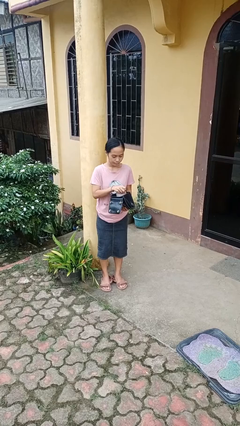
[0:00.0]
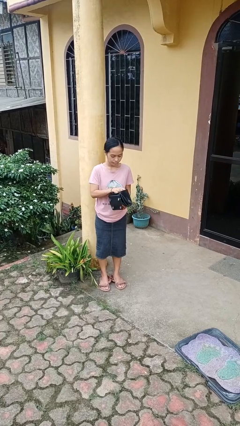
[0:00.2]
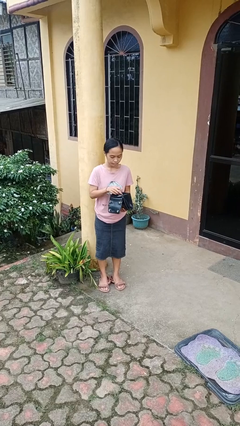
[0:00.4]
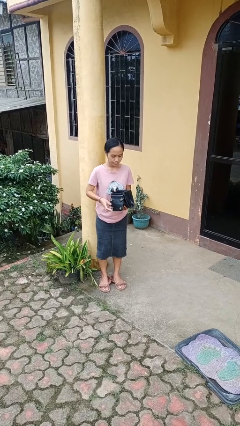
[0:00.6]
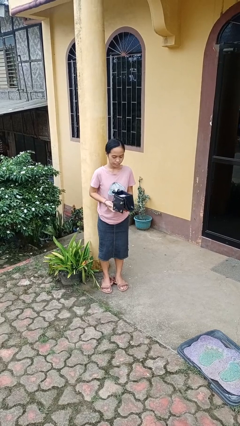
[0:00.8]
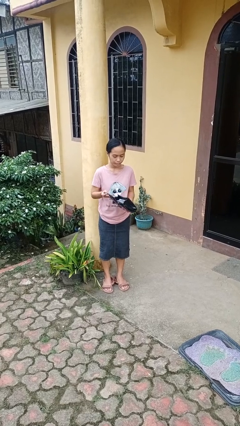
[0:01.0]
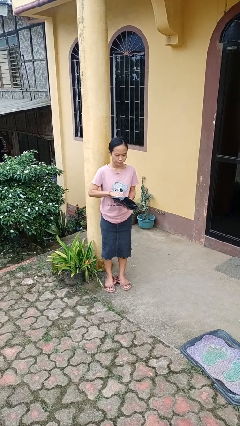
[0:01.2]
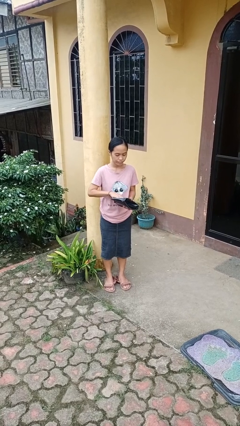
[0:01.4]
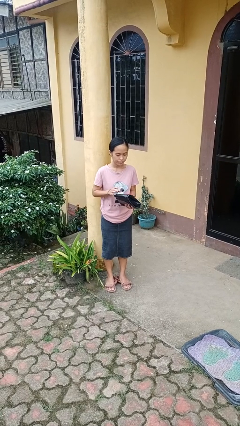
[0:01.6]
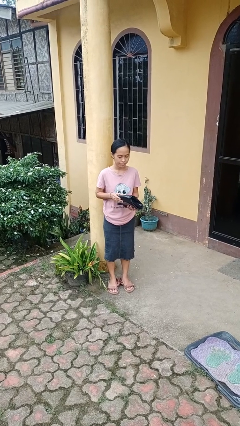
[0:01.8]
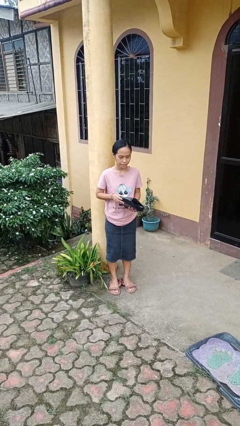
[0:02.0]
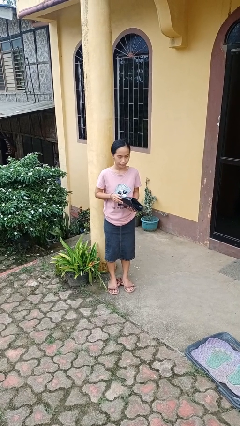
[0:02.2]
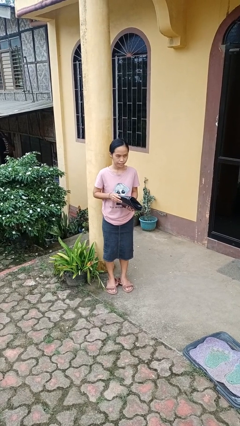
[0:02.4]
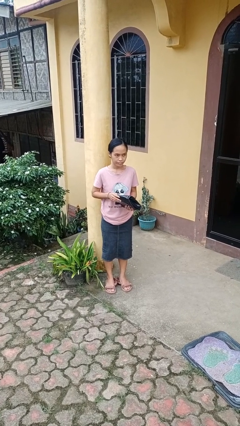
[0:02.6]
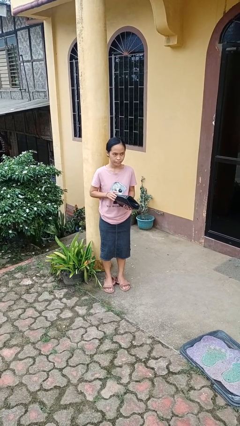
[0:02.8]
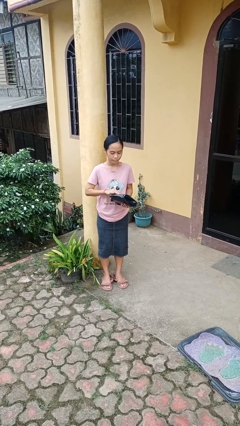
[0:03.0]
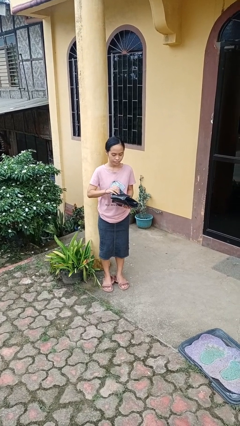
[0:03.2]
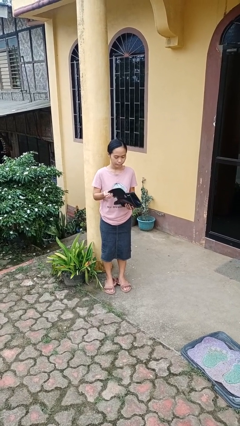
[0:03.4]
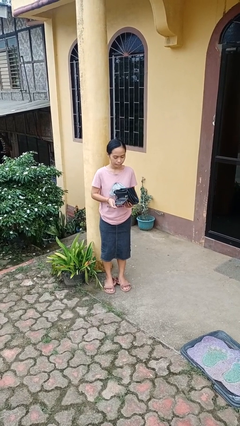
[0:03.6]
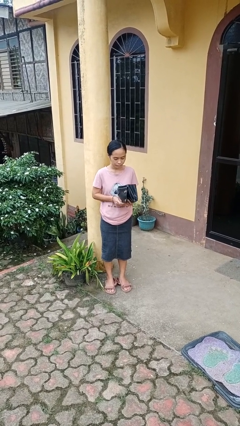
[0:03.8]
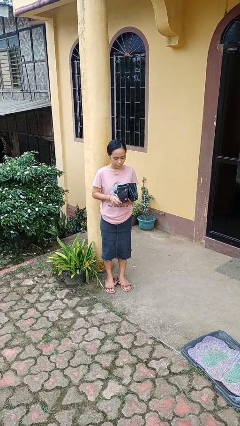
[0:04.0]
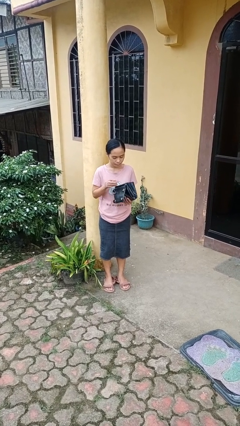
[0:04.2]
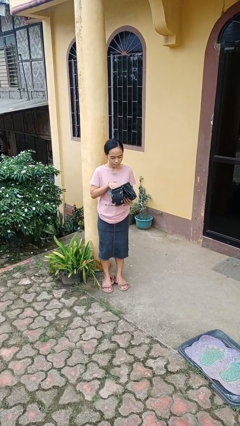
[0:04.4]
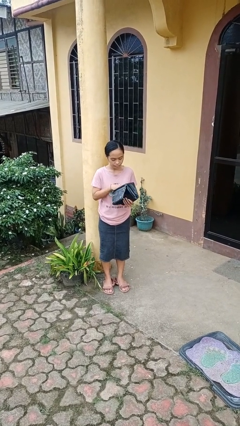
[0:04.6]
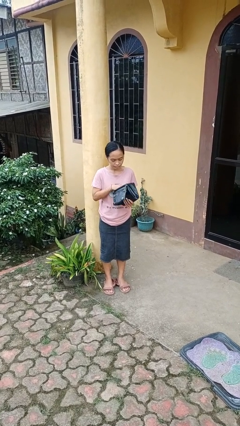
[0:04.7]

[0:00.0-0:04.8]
person puts object into purse

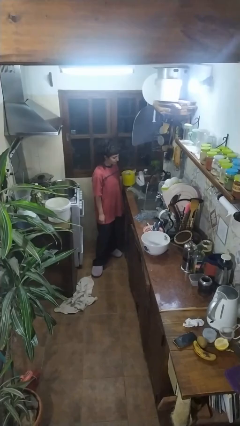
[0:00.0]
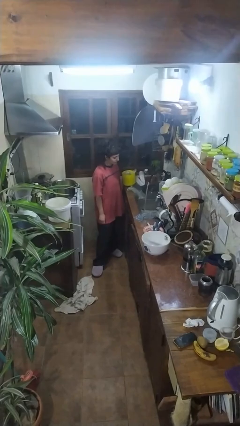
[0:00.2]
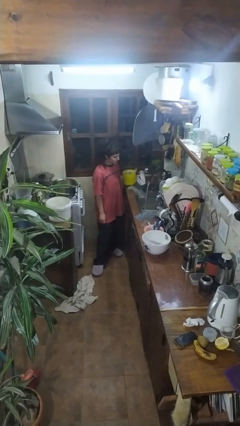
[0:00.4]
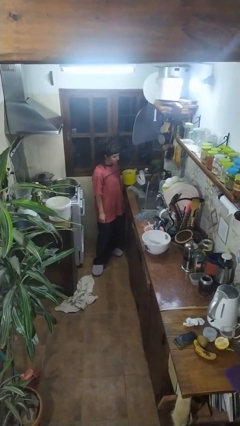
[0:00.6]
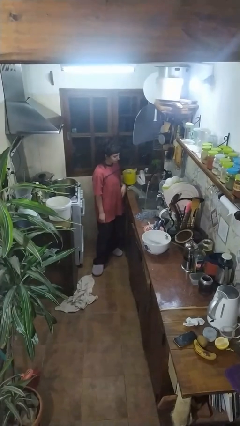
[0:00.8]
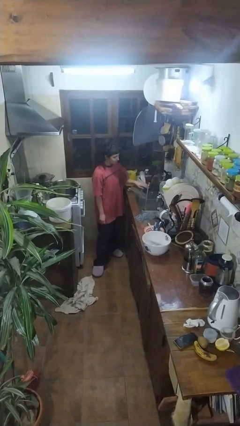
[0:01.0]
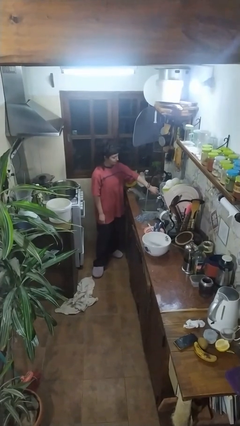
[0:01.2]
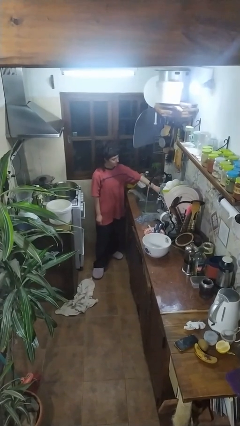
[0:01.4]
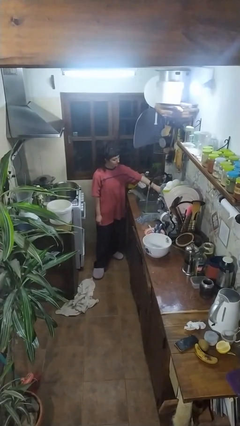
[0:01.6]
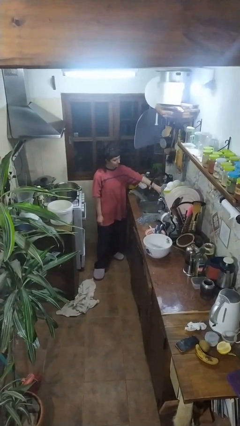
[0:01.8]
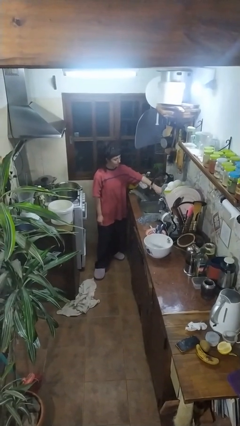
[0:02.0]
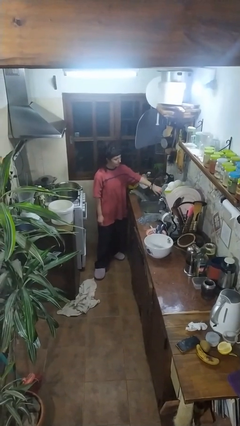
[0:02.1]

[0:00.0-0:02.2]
person turns off faucet

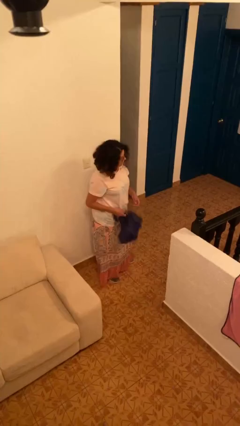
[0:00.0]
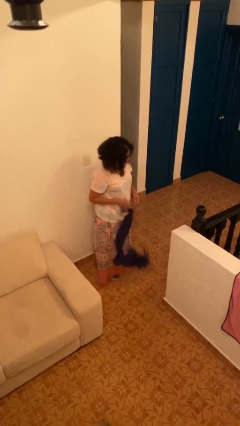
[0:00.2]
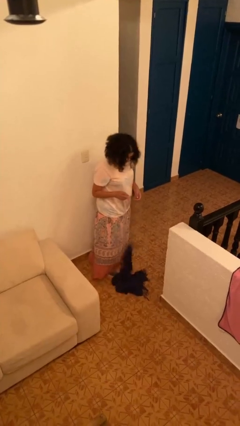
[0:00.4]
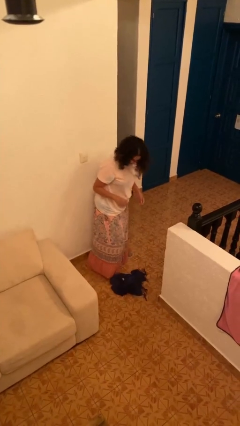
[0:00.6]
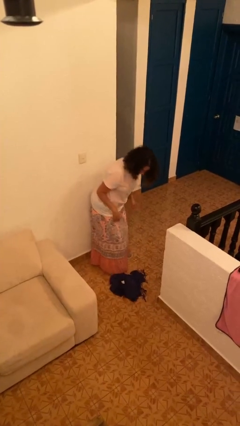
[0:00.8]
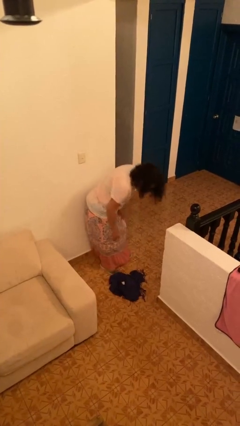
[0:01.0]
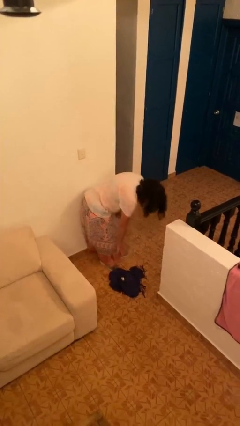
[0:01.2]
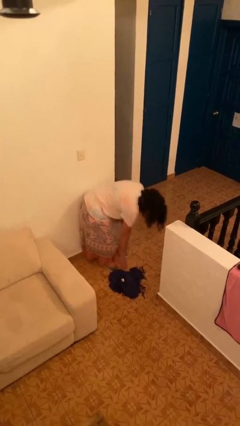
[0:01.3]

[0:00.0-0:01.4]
person drops object

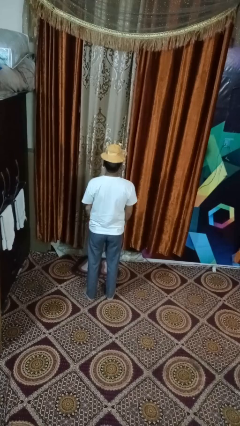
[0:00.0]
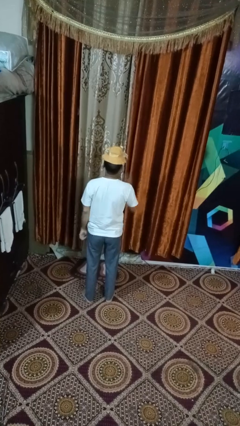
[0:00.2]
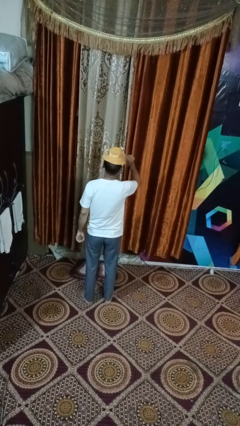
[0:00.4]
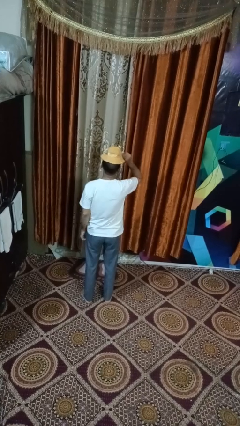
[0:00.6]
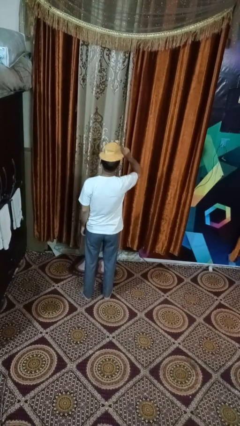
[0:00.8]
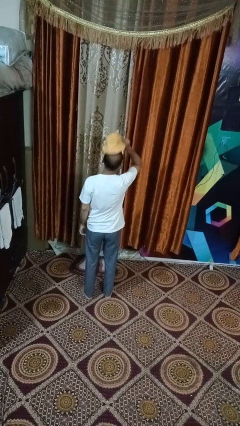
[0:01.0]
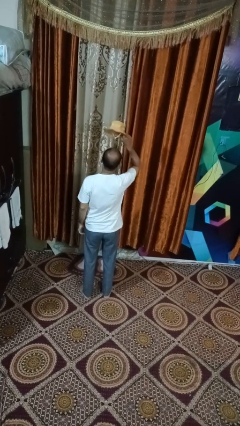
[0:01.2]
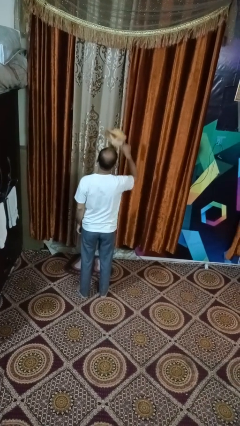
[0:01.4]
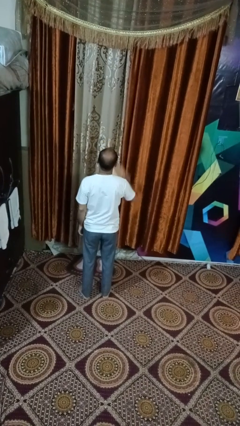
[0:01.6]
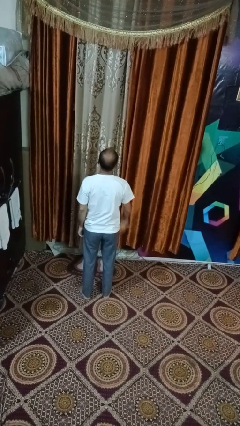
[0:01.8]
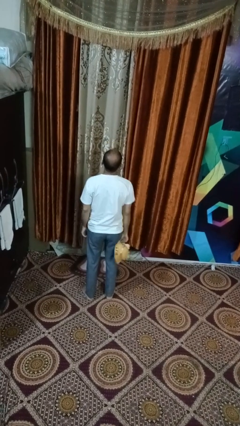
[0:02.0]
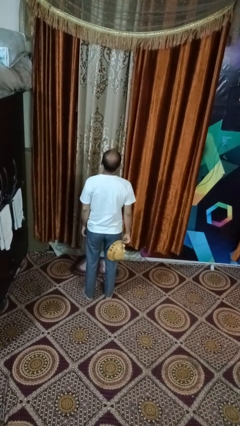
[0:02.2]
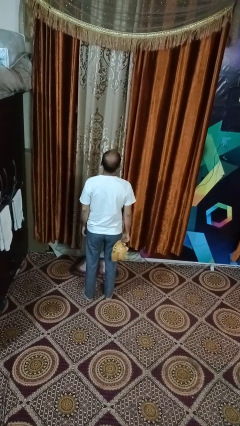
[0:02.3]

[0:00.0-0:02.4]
person takes off hat

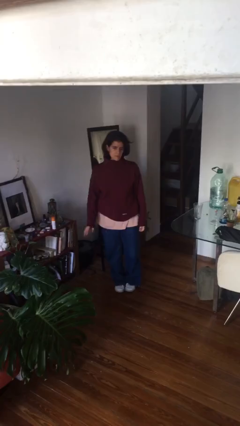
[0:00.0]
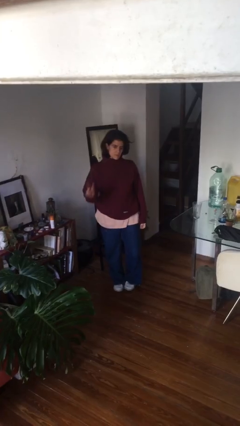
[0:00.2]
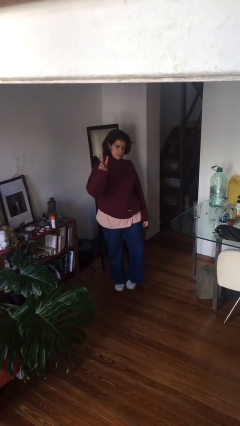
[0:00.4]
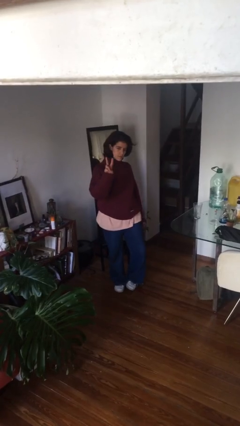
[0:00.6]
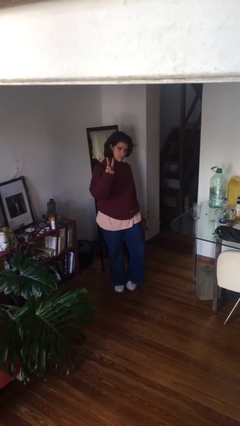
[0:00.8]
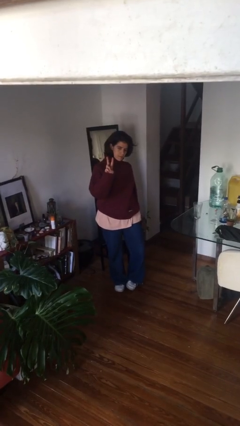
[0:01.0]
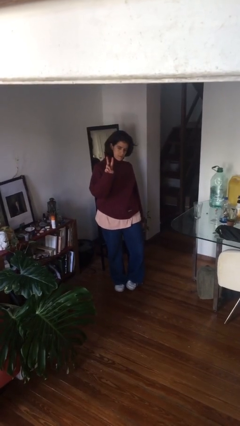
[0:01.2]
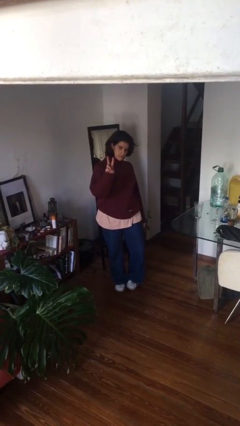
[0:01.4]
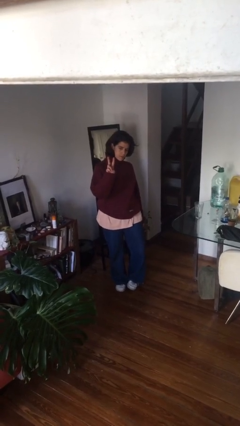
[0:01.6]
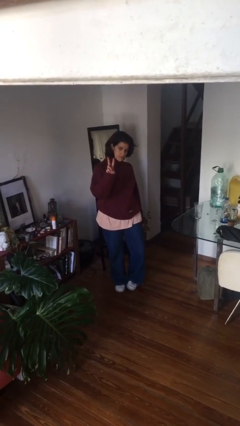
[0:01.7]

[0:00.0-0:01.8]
person gestures peace

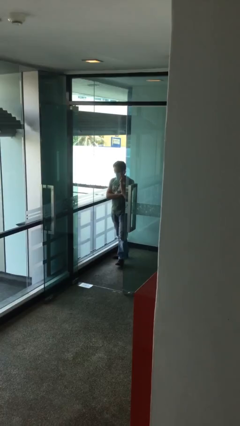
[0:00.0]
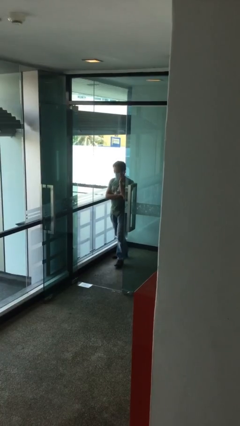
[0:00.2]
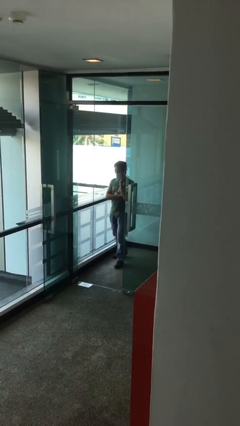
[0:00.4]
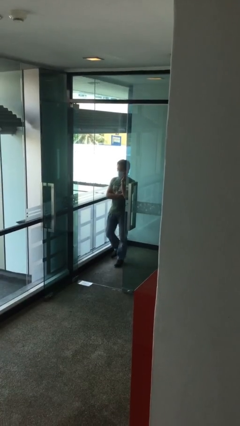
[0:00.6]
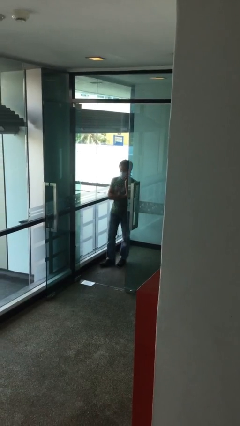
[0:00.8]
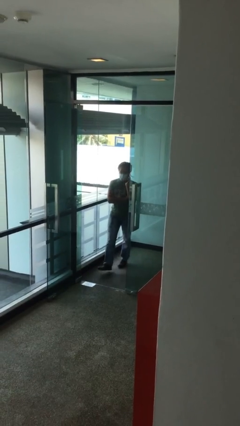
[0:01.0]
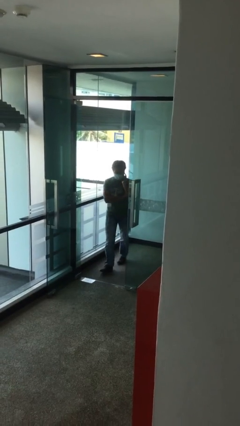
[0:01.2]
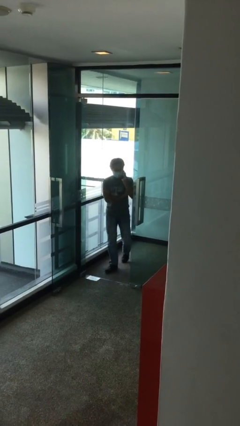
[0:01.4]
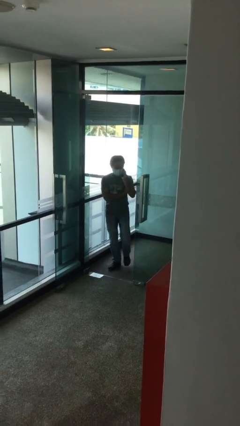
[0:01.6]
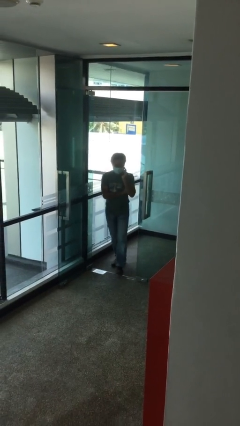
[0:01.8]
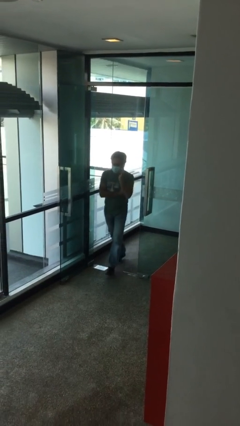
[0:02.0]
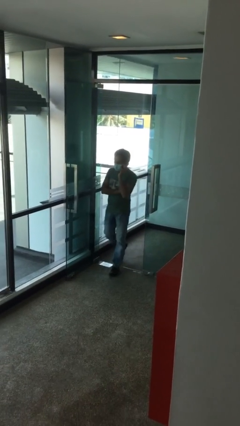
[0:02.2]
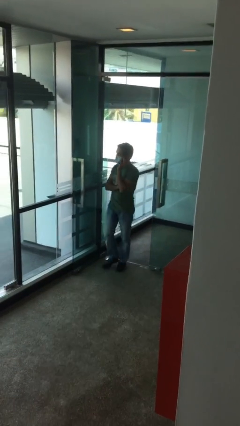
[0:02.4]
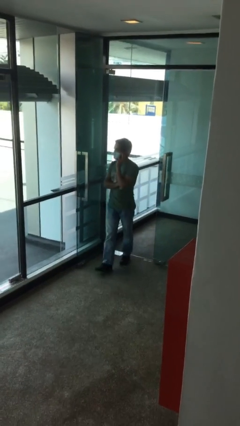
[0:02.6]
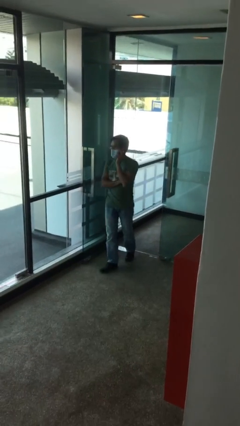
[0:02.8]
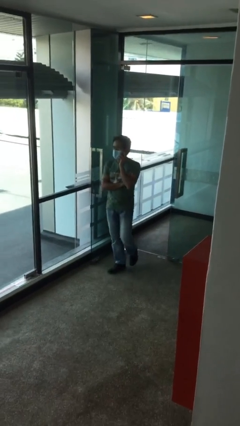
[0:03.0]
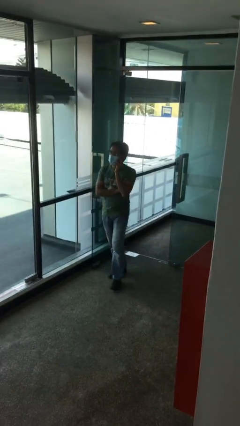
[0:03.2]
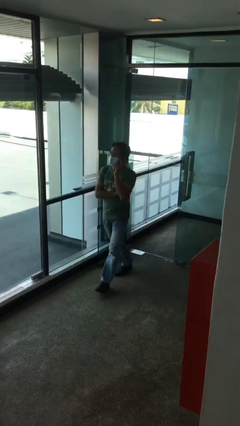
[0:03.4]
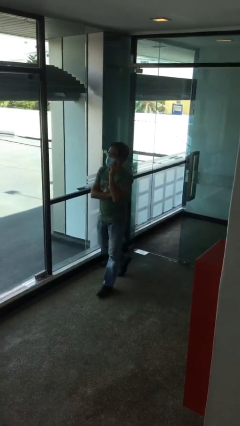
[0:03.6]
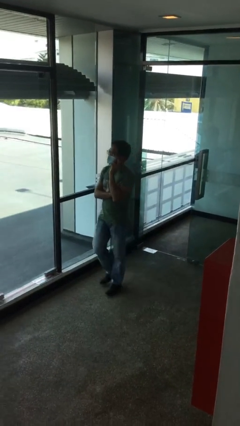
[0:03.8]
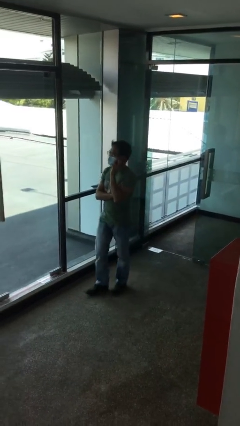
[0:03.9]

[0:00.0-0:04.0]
person enters scene through structure

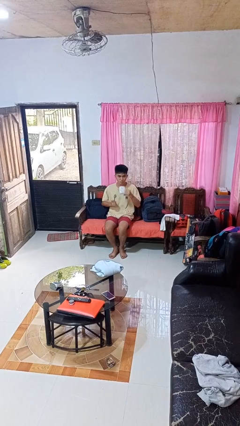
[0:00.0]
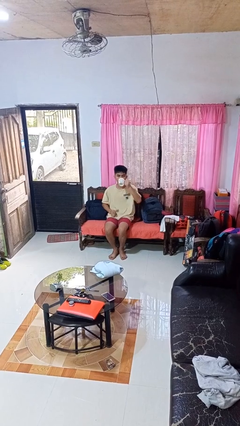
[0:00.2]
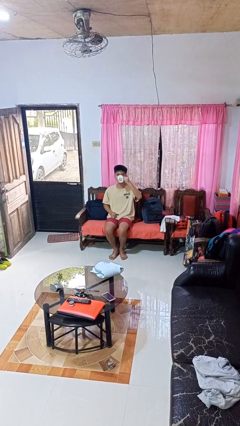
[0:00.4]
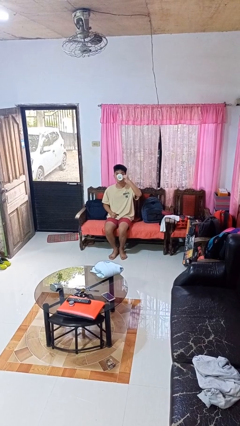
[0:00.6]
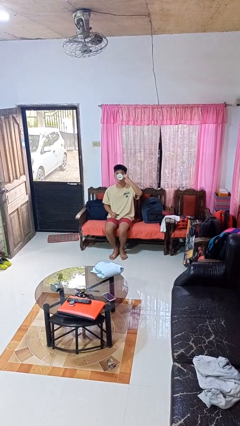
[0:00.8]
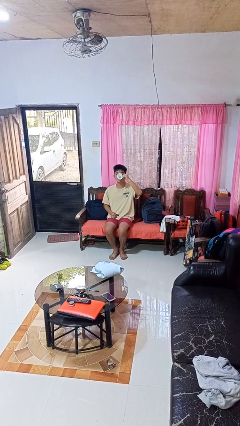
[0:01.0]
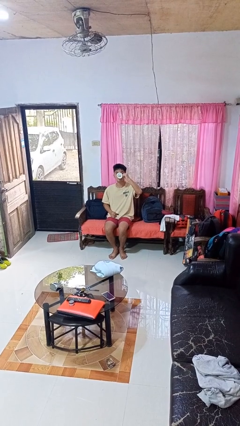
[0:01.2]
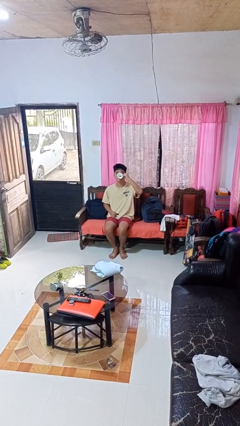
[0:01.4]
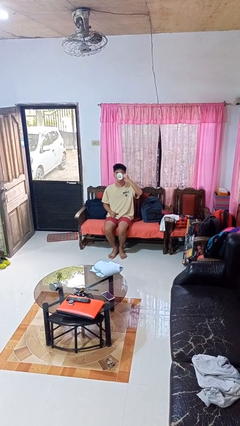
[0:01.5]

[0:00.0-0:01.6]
person drinks from mug
